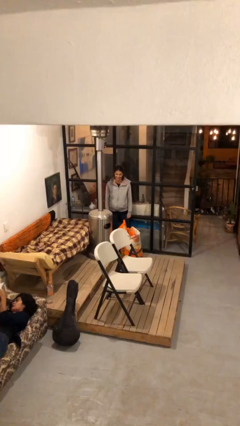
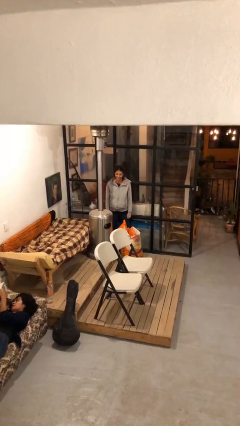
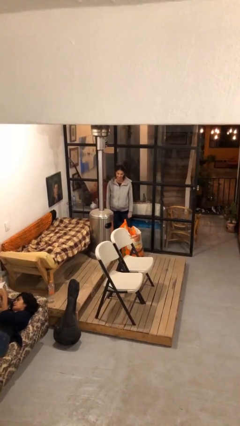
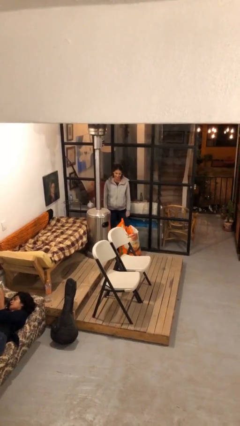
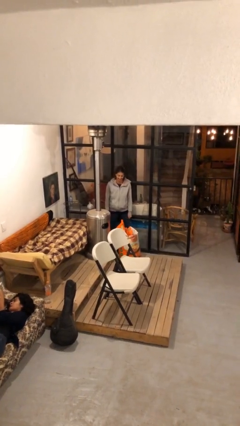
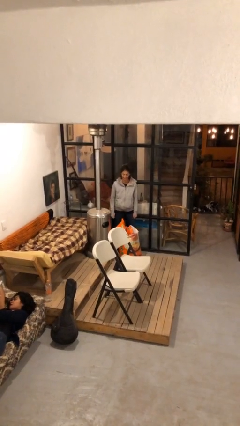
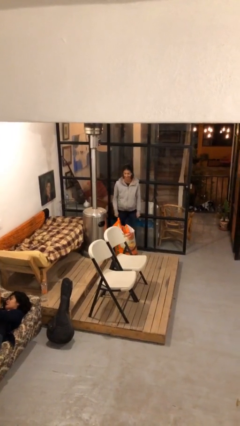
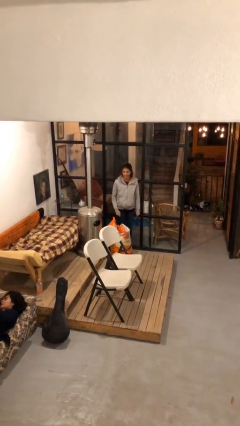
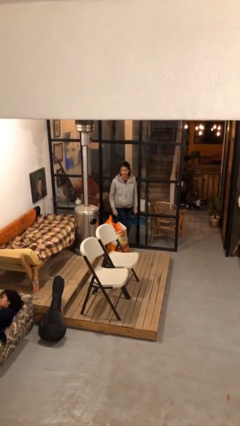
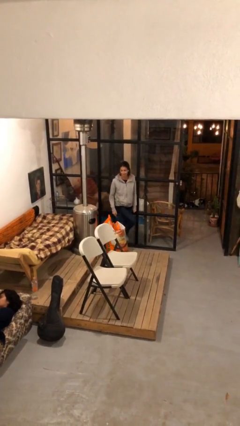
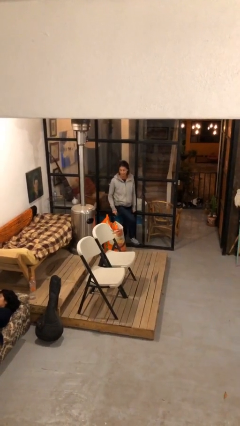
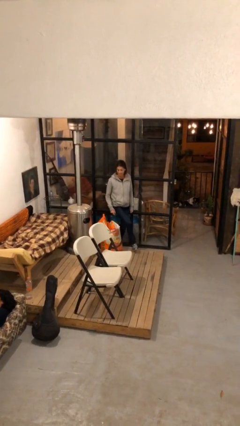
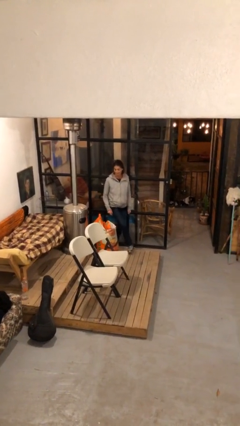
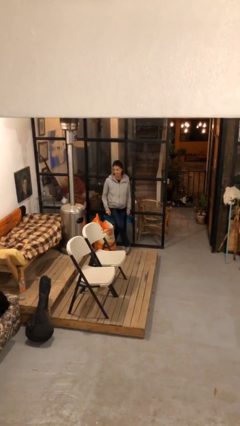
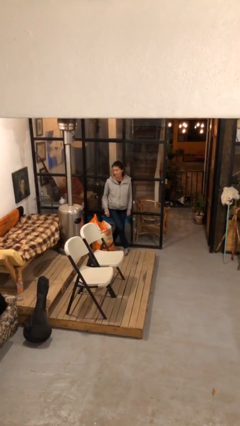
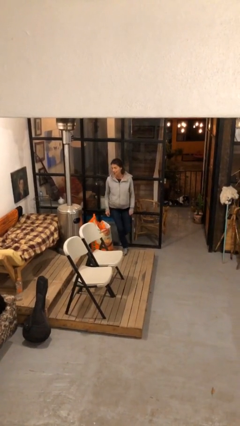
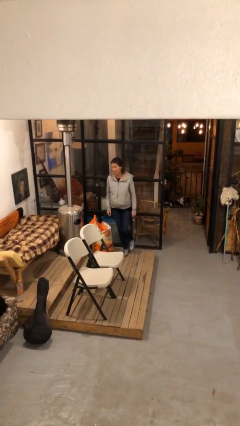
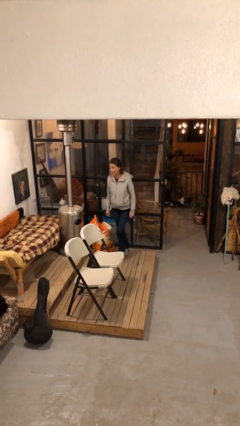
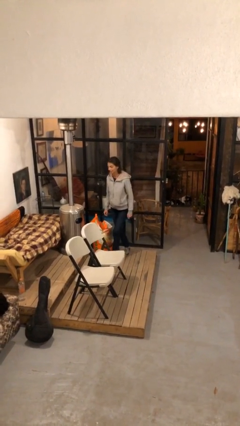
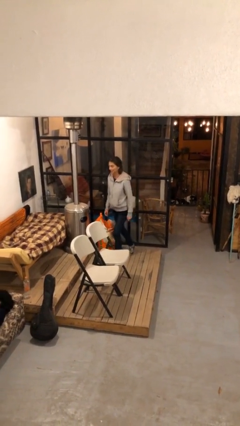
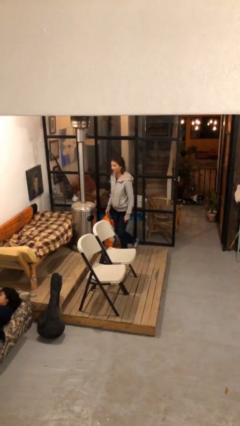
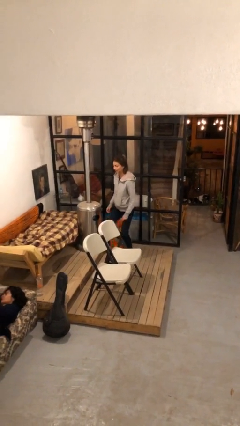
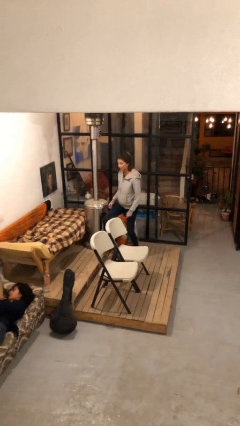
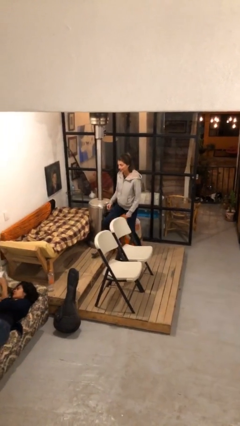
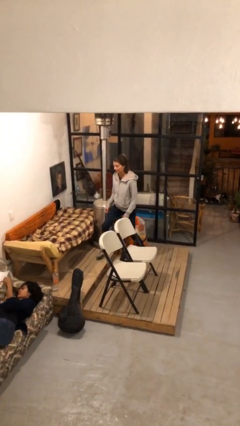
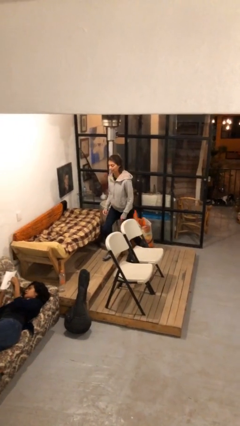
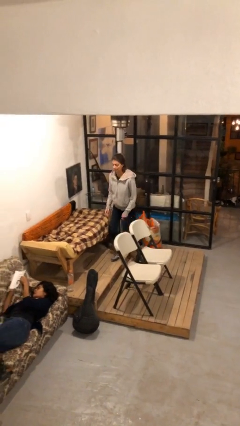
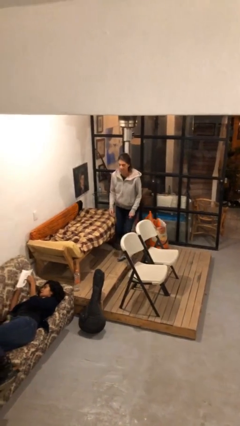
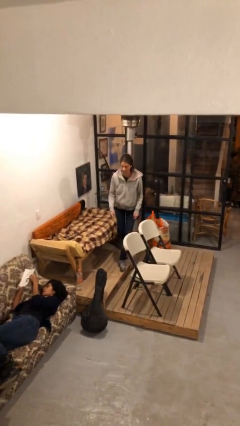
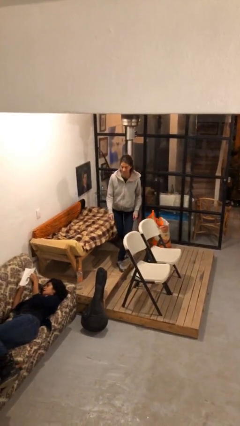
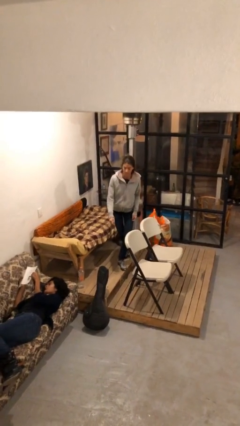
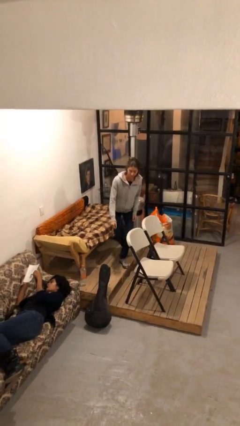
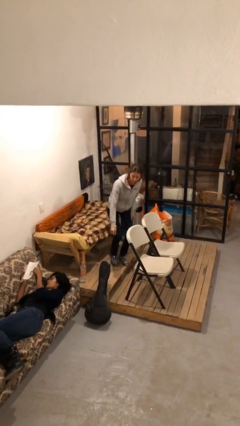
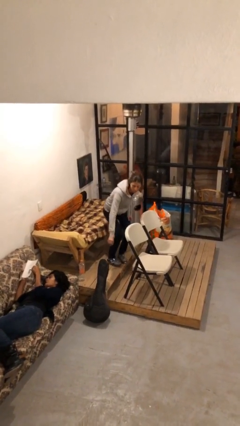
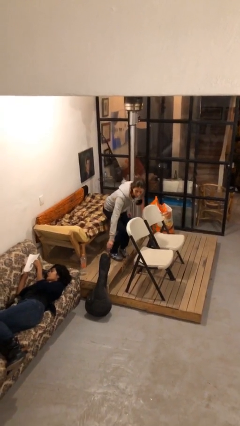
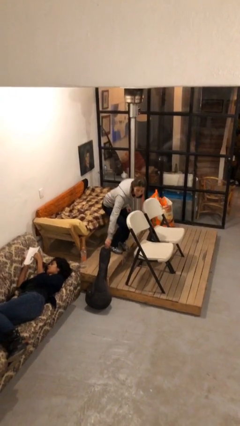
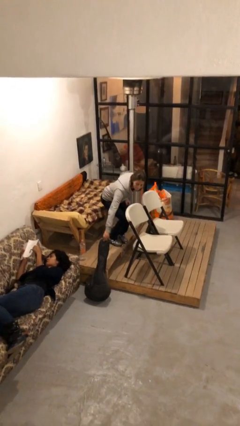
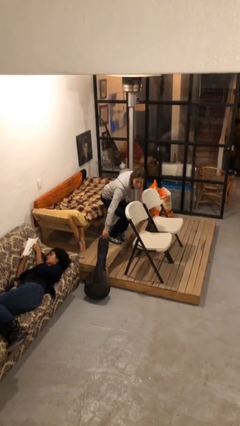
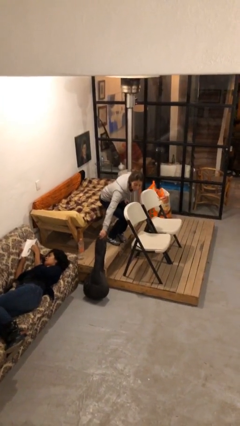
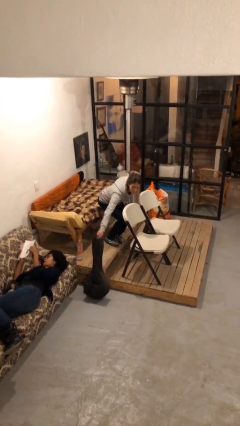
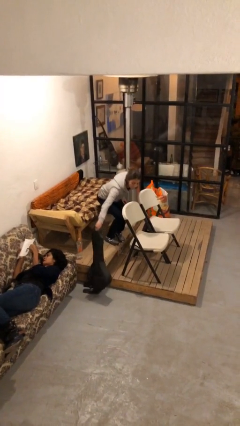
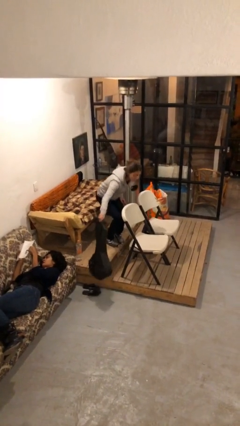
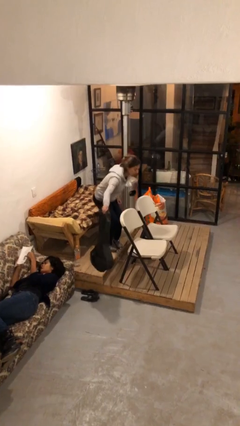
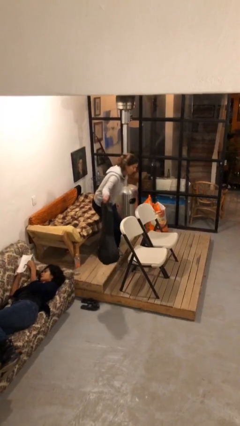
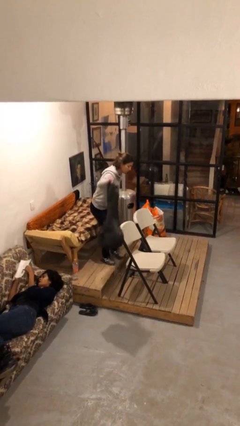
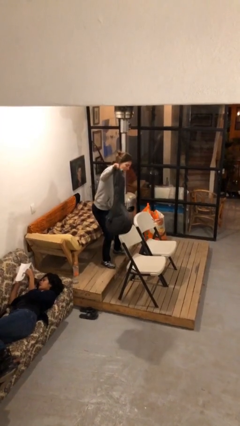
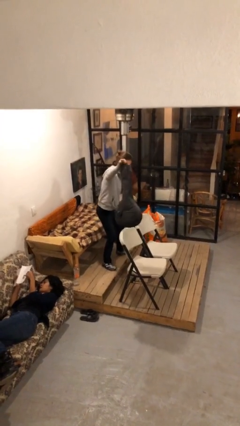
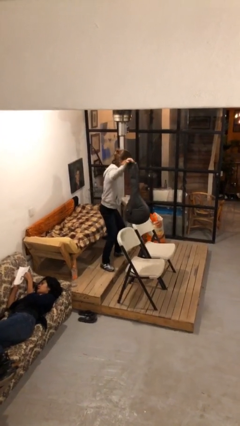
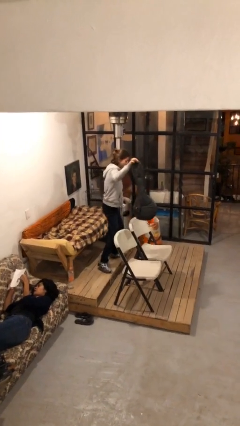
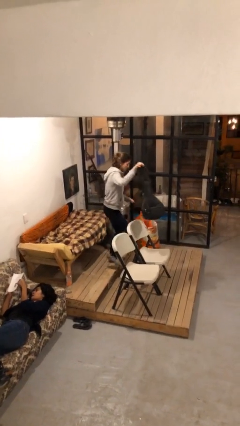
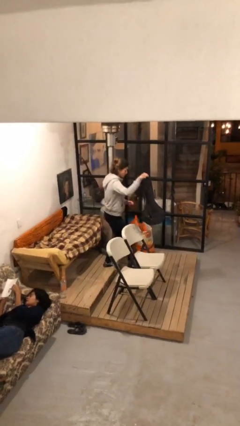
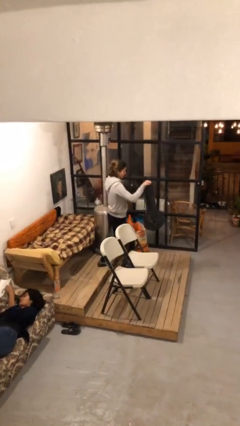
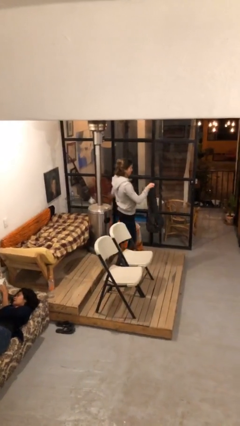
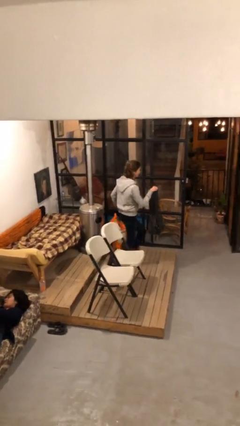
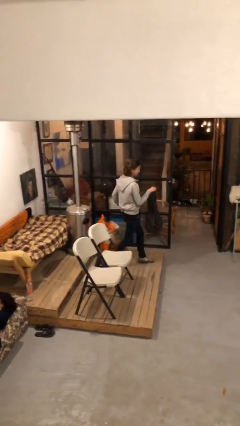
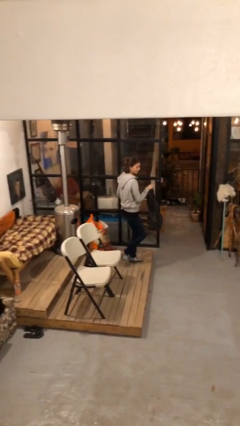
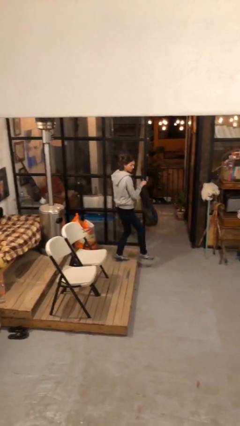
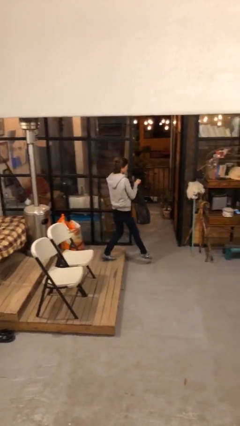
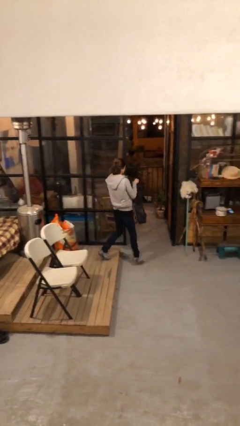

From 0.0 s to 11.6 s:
person steals object from person

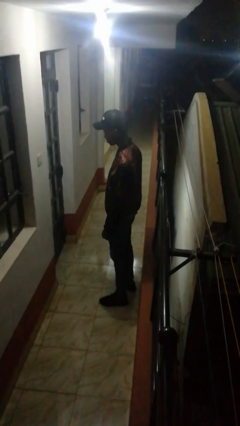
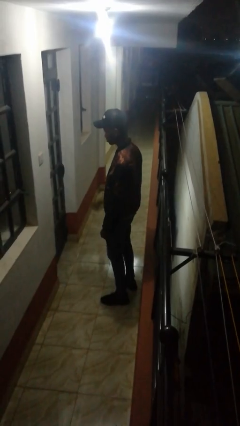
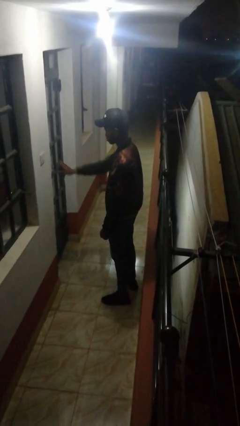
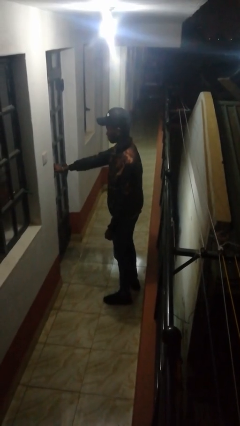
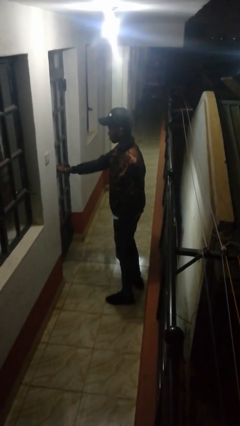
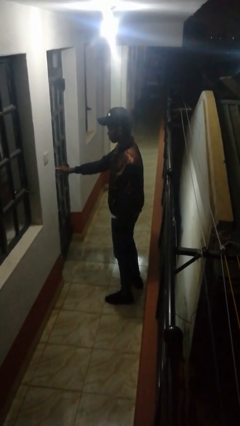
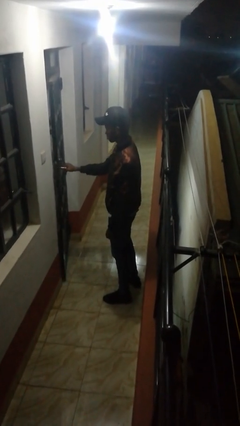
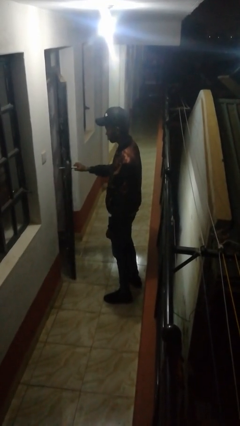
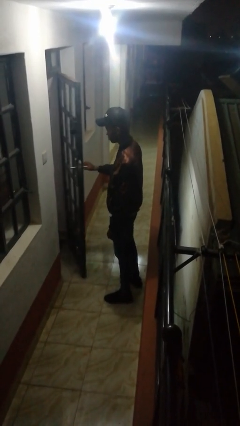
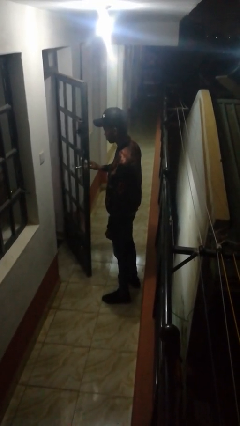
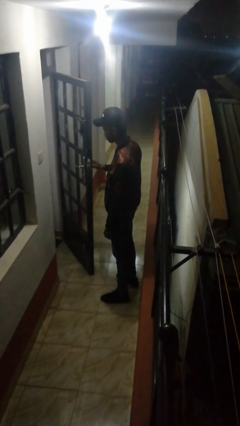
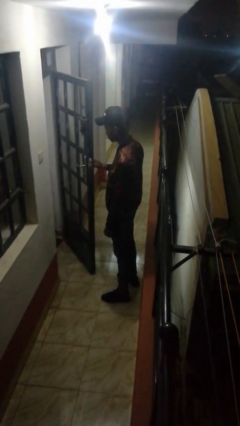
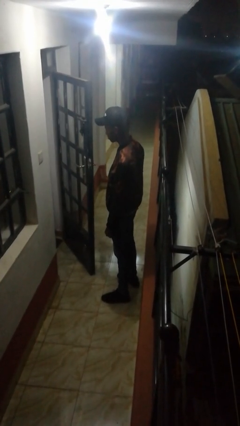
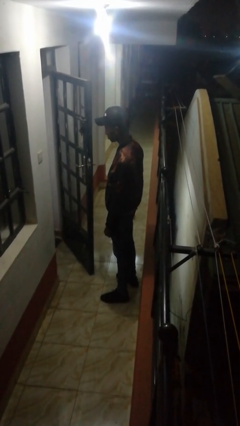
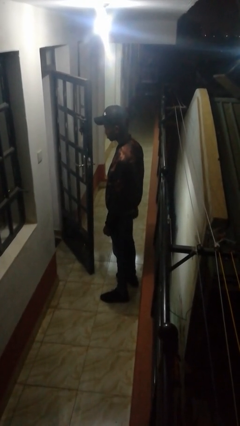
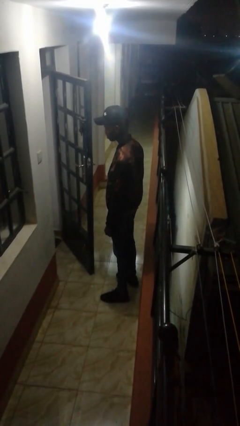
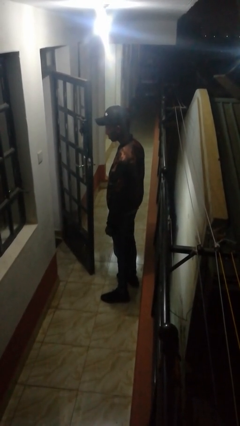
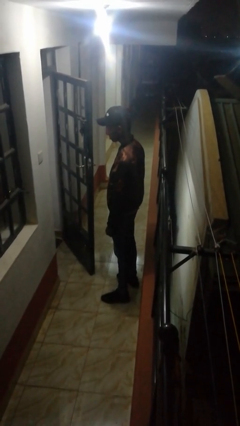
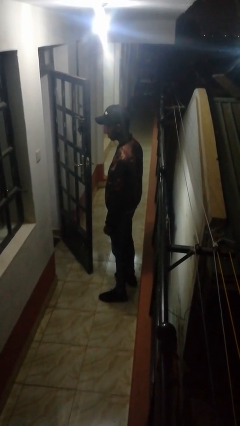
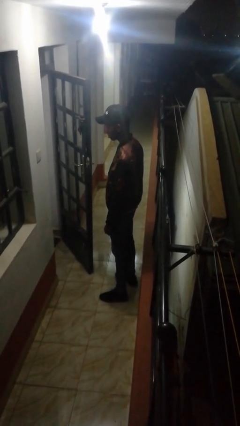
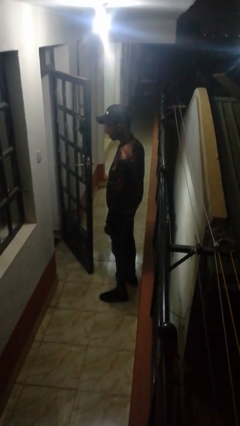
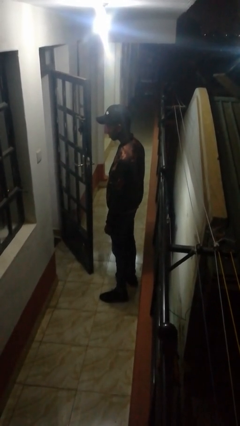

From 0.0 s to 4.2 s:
person opens facility door

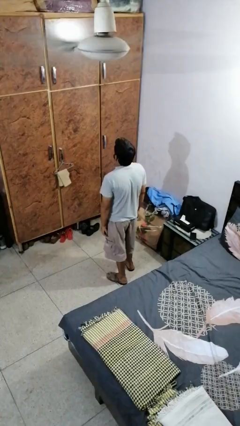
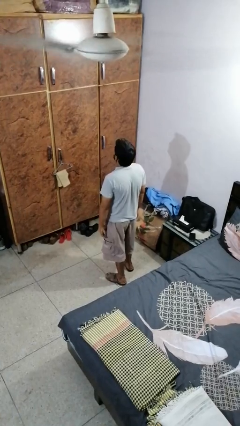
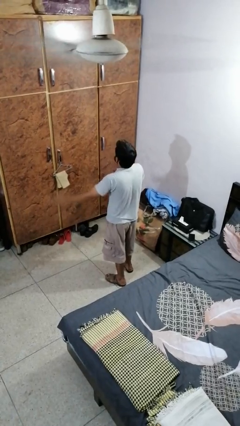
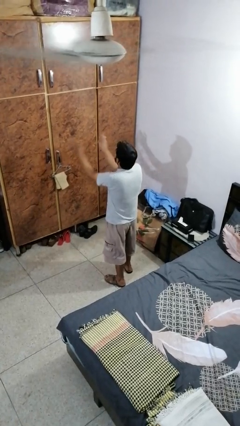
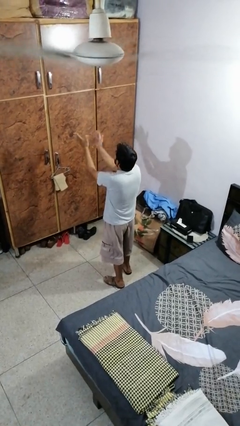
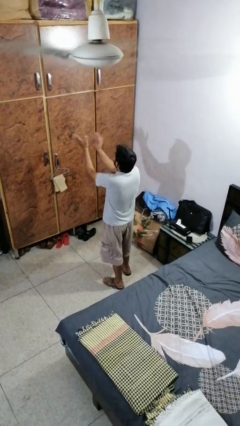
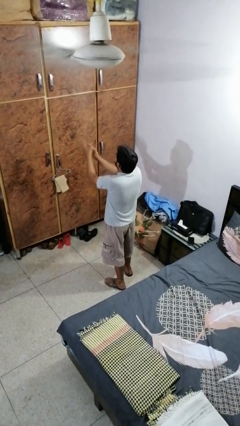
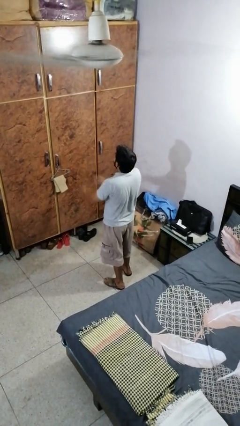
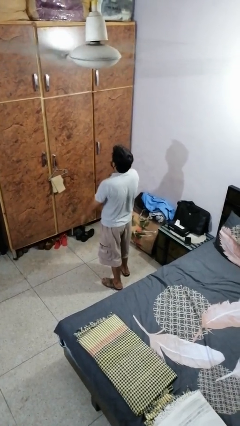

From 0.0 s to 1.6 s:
person claps hands
